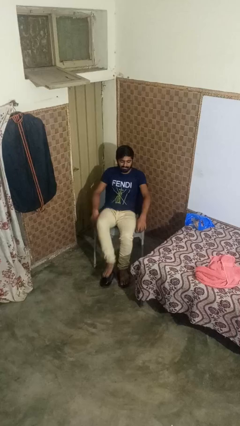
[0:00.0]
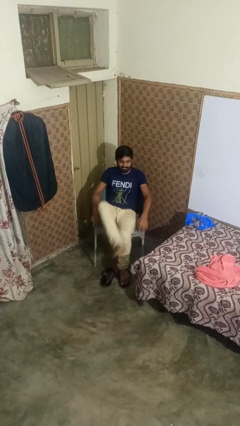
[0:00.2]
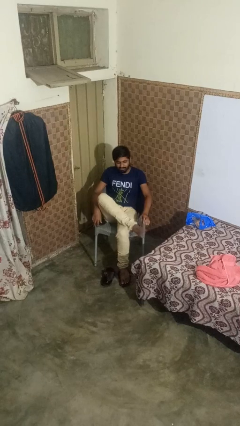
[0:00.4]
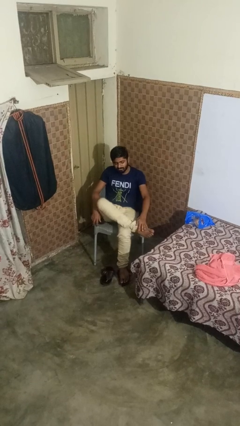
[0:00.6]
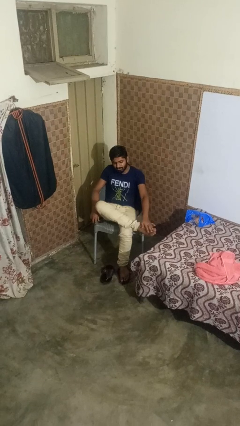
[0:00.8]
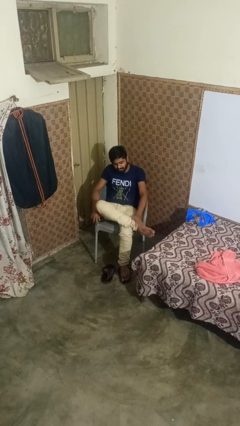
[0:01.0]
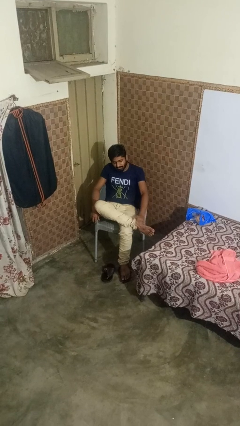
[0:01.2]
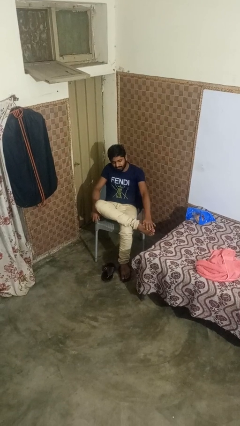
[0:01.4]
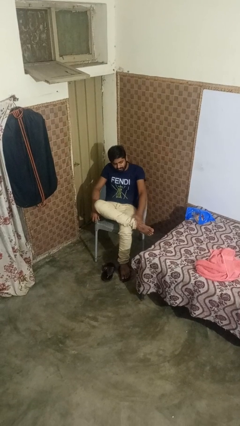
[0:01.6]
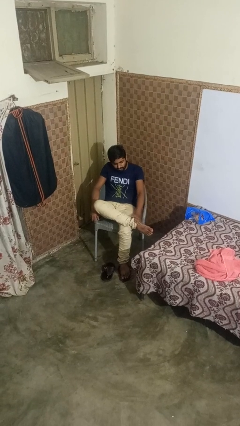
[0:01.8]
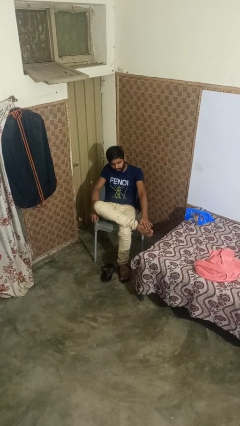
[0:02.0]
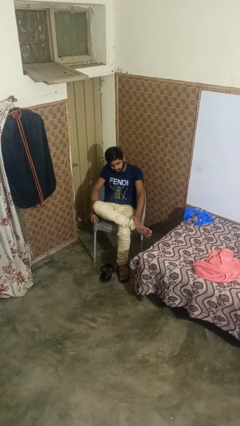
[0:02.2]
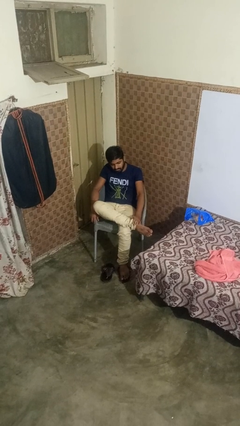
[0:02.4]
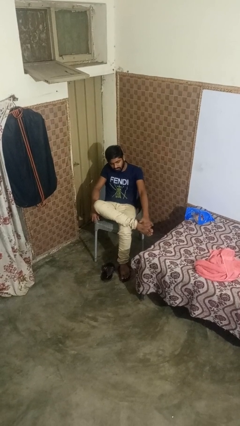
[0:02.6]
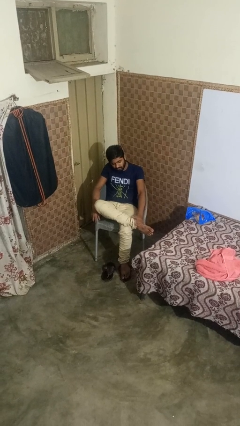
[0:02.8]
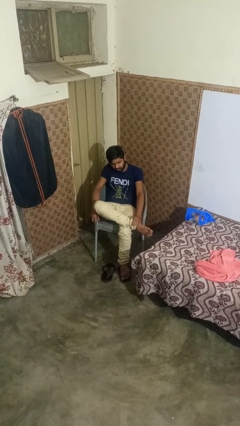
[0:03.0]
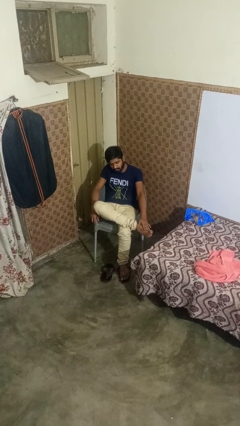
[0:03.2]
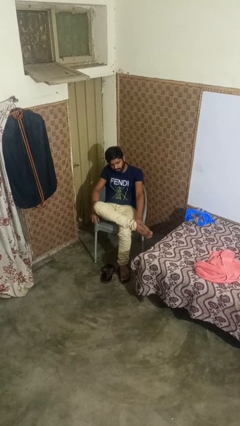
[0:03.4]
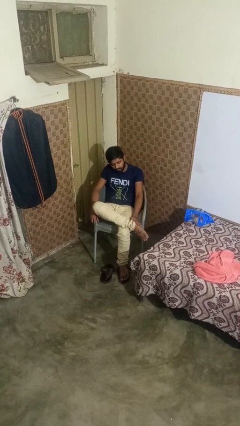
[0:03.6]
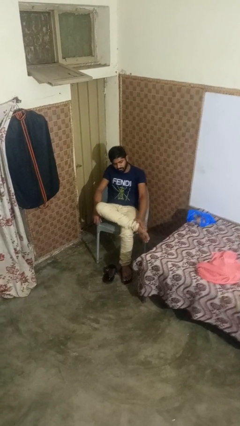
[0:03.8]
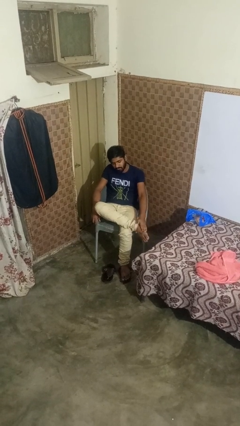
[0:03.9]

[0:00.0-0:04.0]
person rubs foot

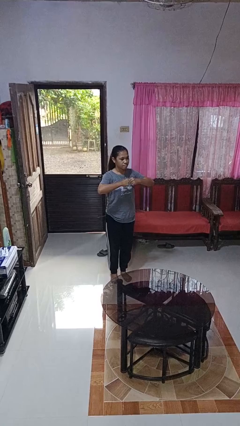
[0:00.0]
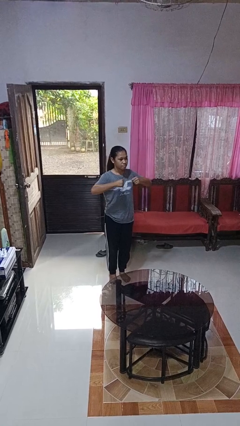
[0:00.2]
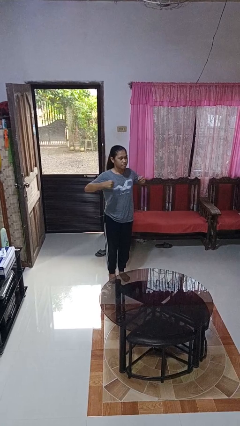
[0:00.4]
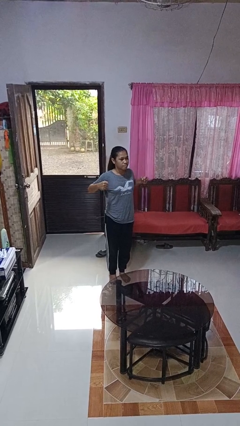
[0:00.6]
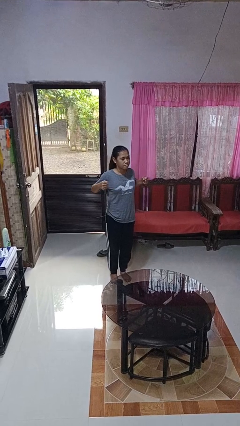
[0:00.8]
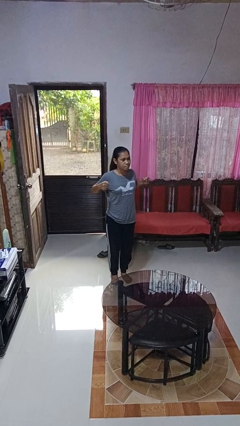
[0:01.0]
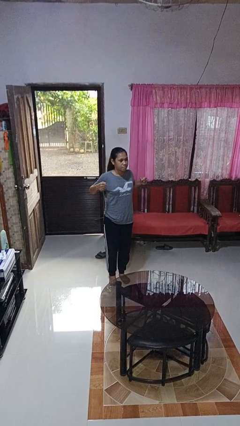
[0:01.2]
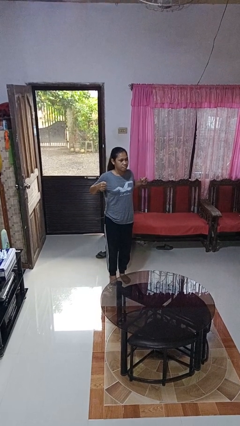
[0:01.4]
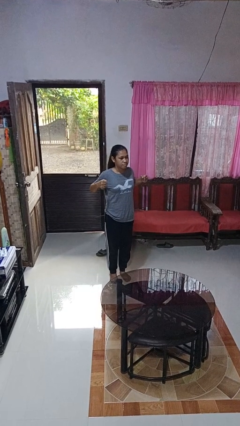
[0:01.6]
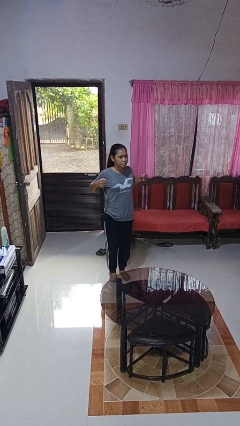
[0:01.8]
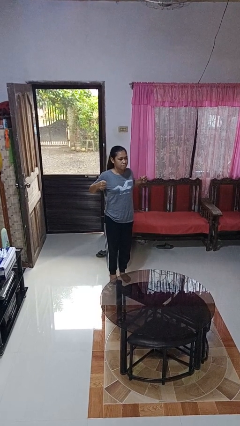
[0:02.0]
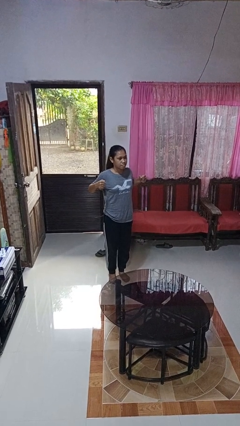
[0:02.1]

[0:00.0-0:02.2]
person gestures zoom in

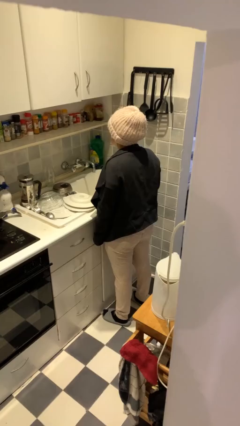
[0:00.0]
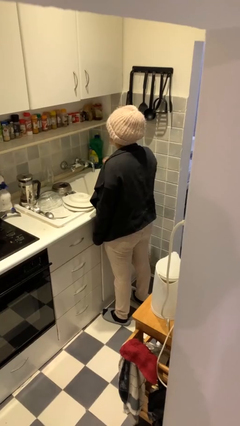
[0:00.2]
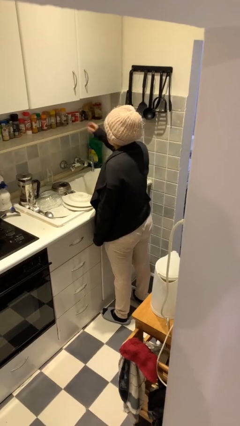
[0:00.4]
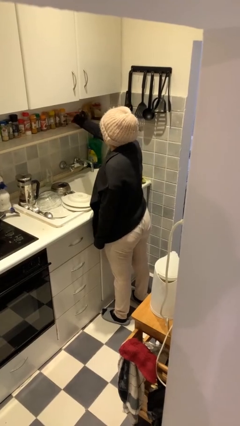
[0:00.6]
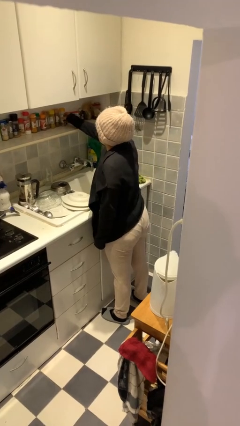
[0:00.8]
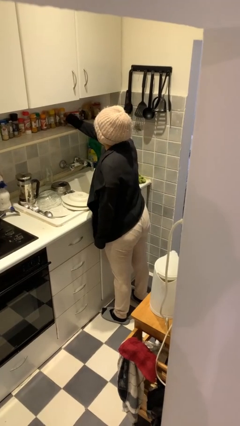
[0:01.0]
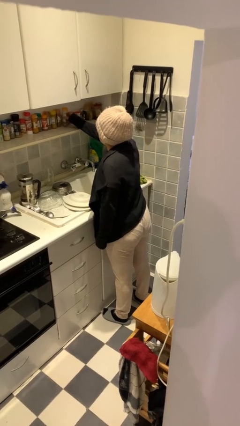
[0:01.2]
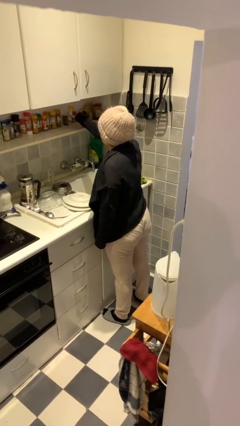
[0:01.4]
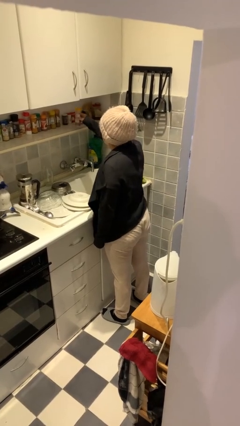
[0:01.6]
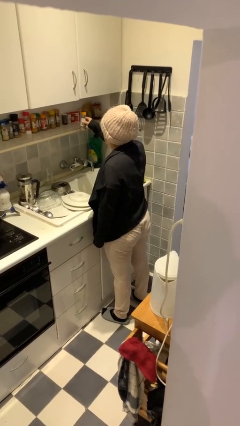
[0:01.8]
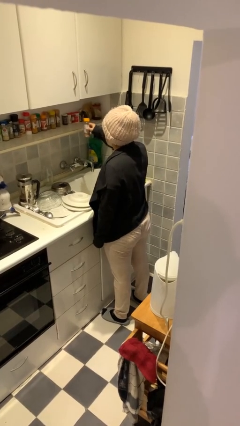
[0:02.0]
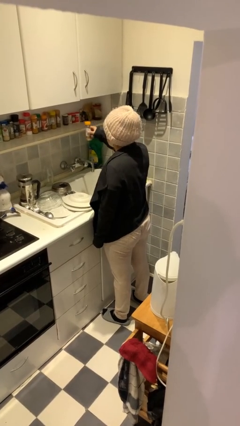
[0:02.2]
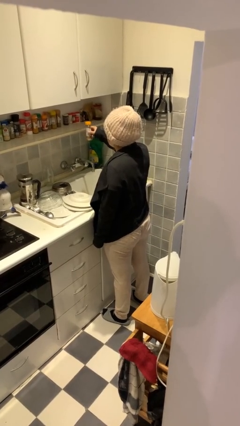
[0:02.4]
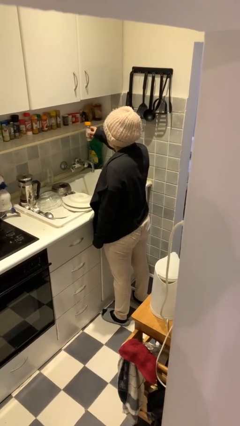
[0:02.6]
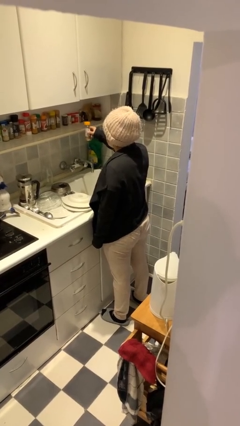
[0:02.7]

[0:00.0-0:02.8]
person picks up object from countertop

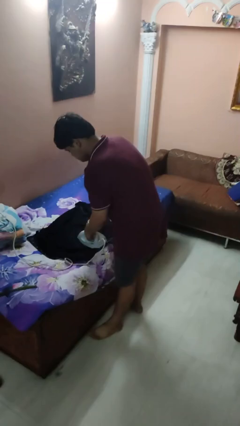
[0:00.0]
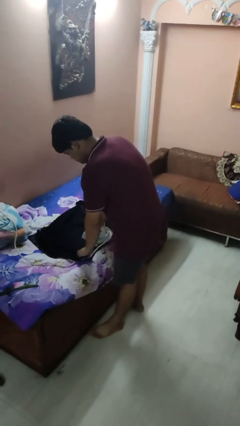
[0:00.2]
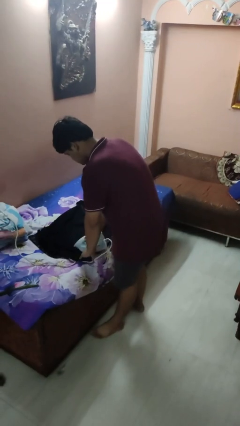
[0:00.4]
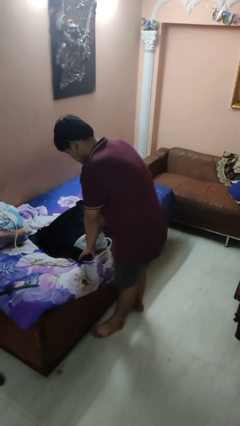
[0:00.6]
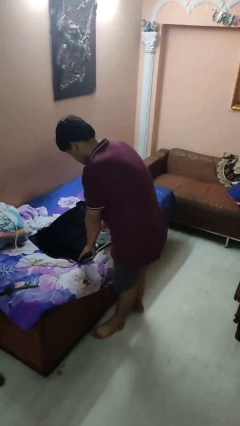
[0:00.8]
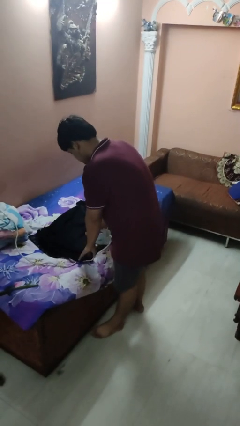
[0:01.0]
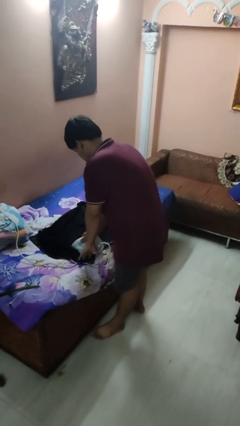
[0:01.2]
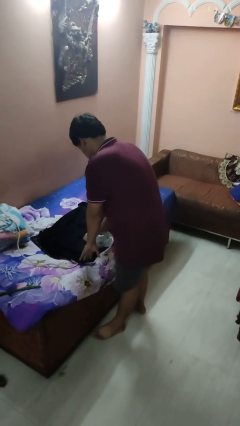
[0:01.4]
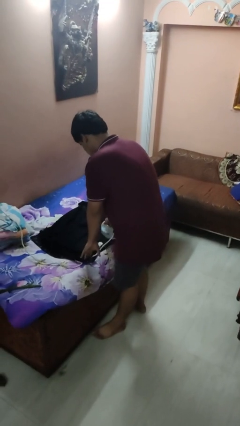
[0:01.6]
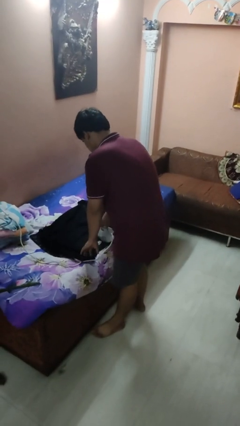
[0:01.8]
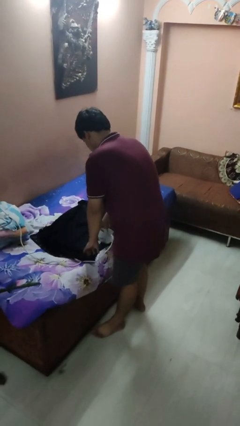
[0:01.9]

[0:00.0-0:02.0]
person irons clothes

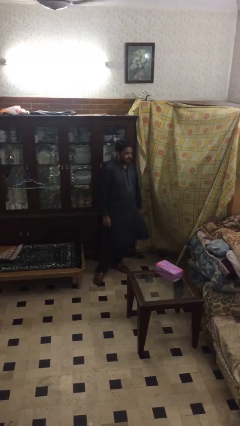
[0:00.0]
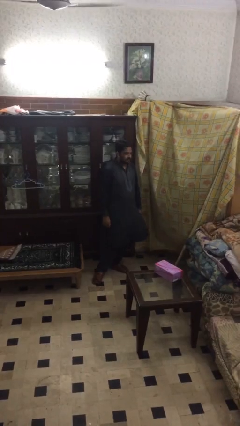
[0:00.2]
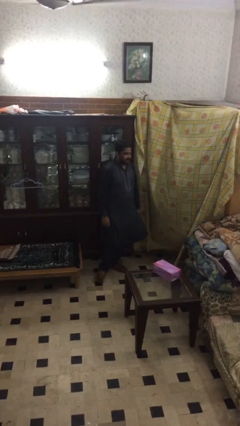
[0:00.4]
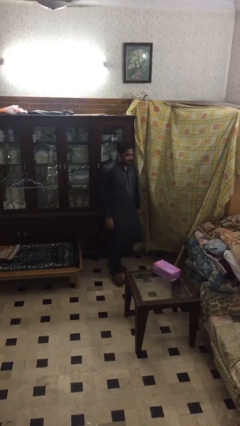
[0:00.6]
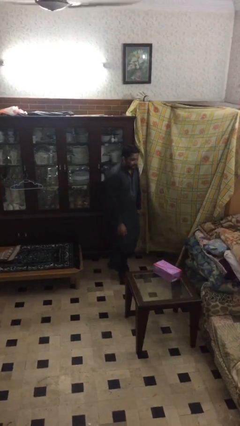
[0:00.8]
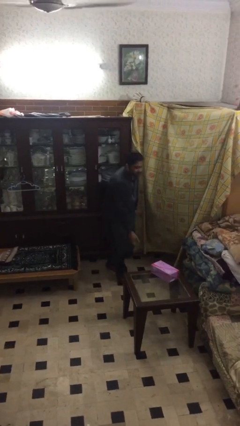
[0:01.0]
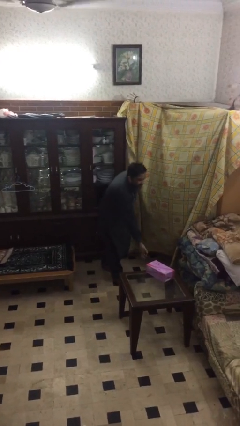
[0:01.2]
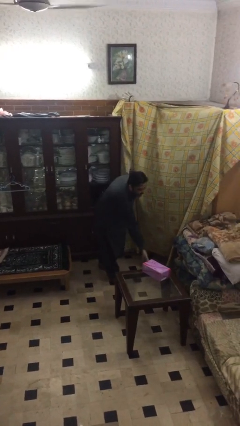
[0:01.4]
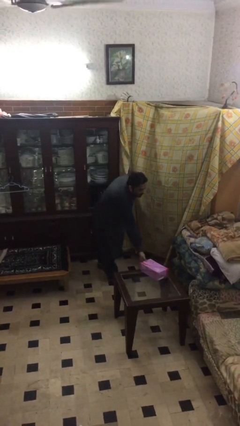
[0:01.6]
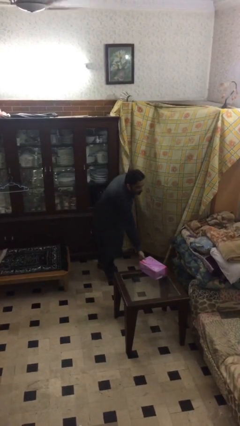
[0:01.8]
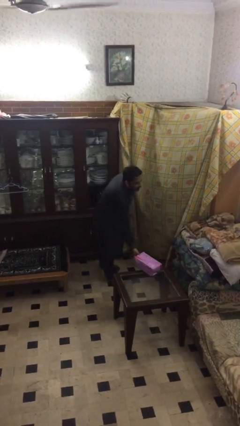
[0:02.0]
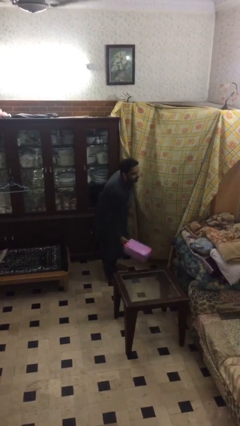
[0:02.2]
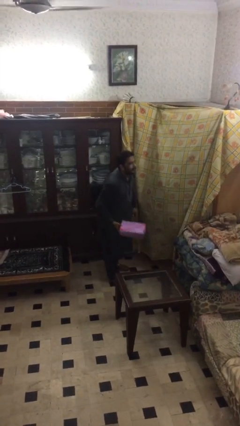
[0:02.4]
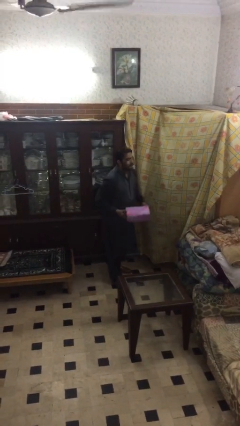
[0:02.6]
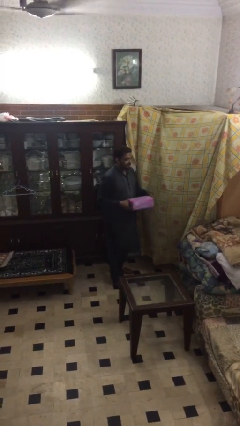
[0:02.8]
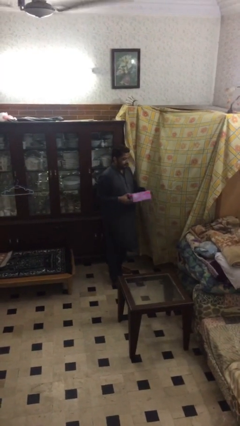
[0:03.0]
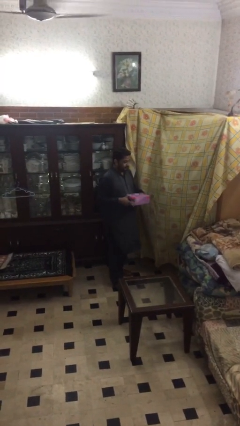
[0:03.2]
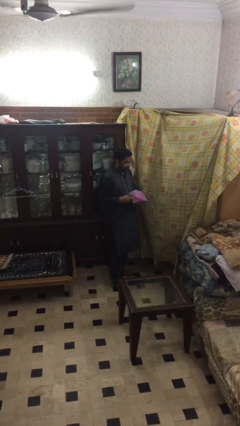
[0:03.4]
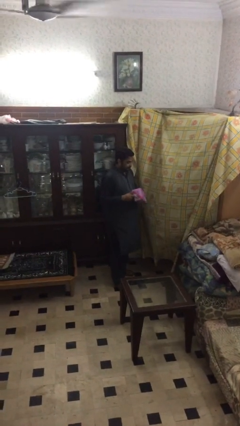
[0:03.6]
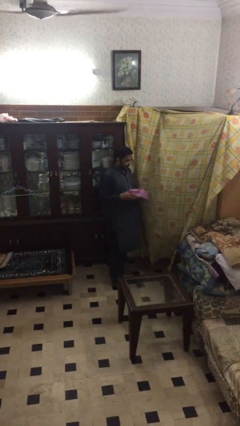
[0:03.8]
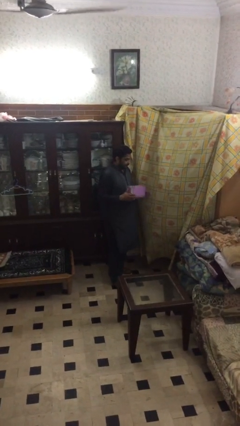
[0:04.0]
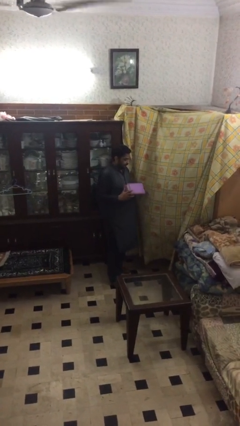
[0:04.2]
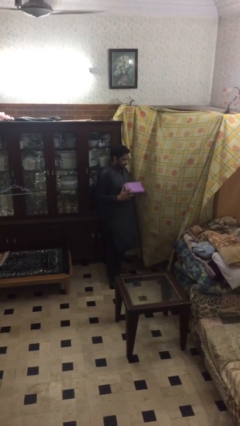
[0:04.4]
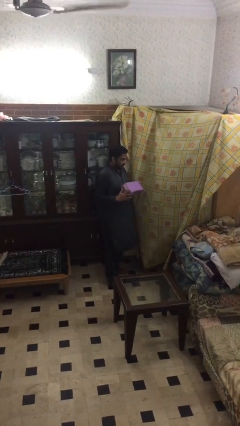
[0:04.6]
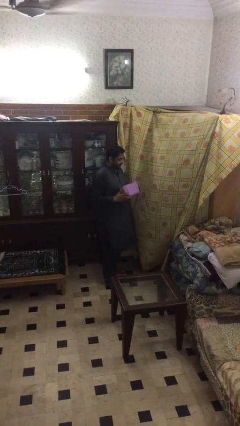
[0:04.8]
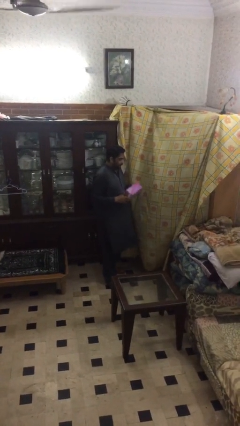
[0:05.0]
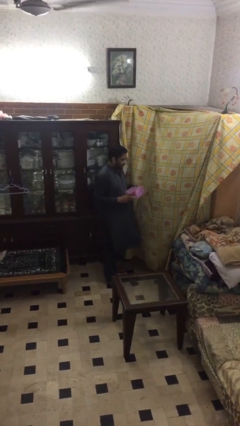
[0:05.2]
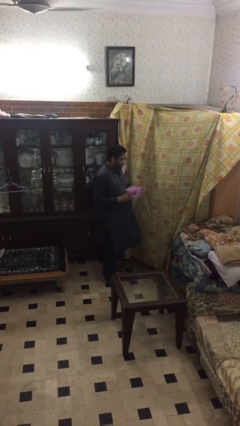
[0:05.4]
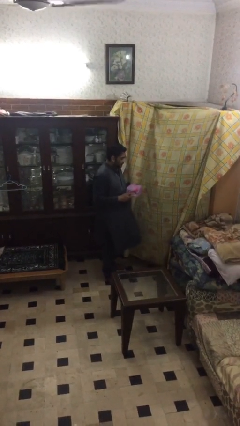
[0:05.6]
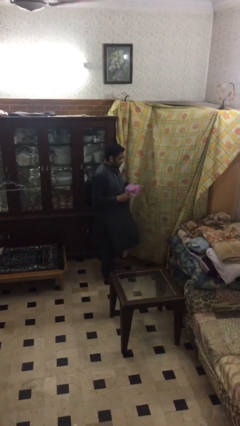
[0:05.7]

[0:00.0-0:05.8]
person picks up object from table

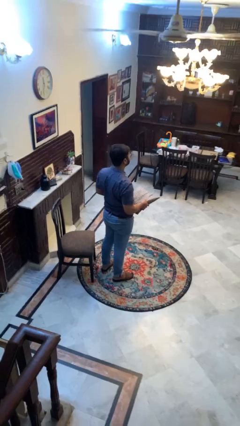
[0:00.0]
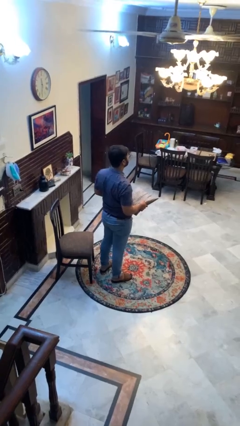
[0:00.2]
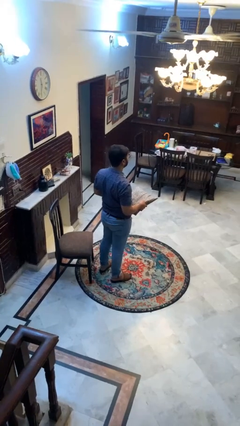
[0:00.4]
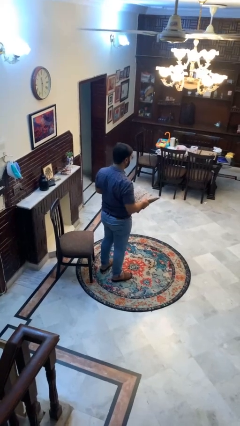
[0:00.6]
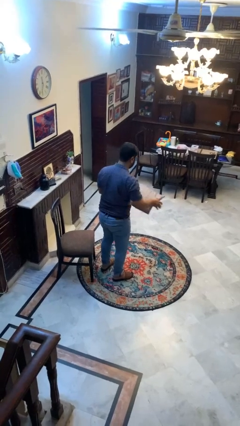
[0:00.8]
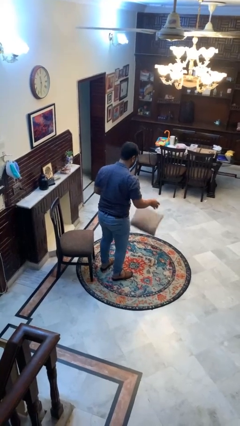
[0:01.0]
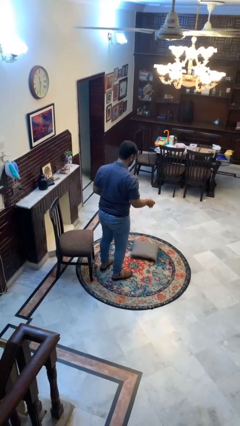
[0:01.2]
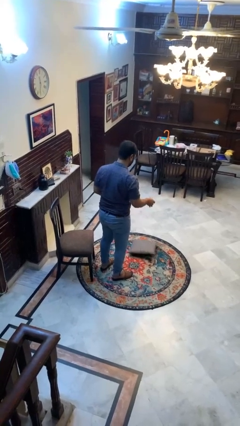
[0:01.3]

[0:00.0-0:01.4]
person drops object
